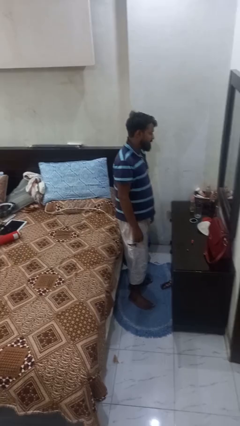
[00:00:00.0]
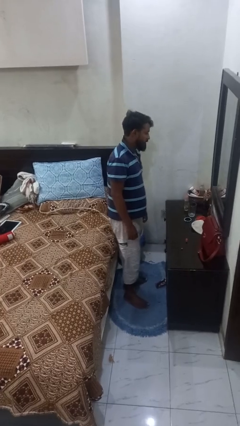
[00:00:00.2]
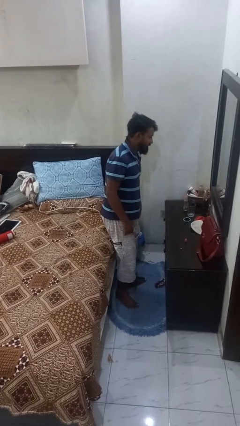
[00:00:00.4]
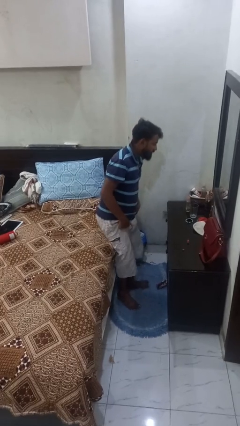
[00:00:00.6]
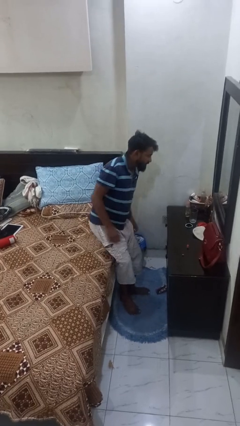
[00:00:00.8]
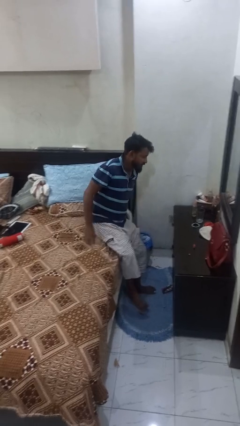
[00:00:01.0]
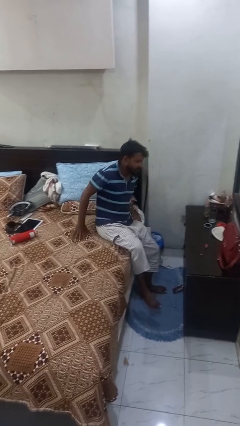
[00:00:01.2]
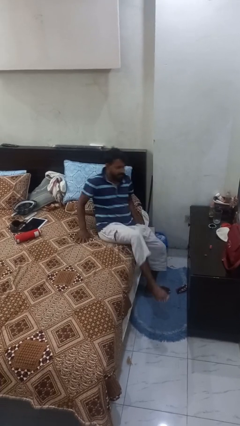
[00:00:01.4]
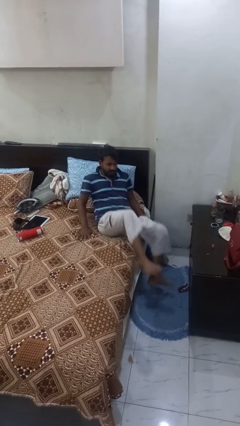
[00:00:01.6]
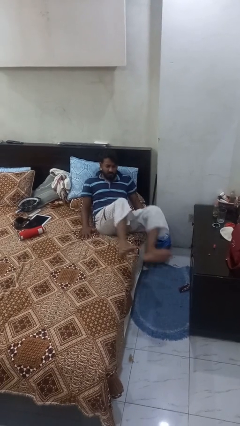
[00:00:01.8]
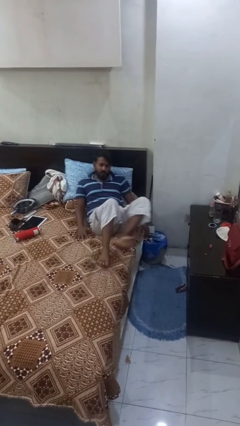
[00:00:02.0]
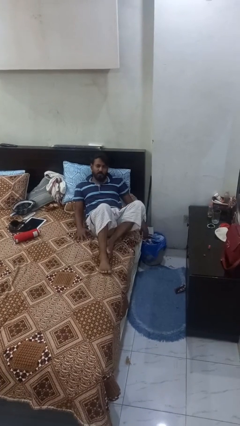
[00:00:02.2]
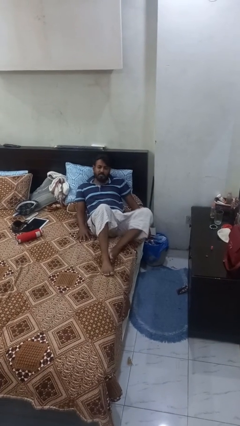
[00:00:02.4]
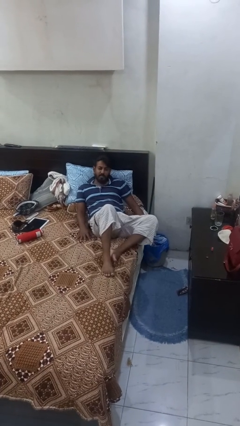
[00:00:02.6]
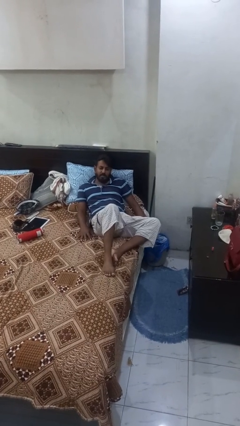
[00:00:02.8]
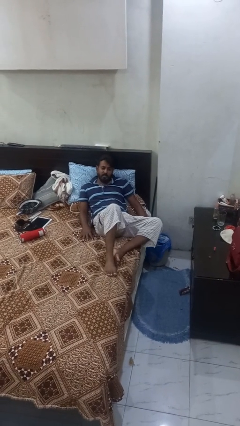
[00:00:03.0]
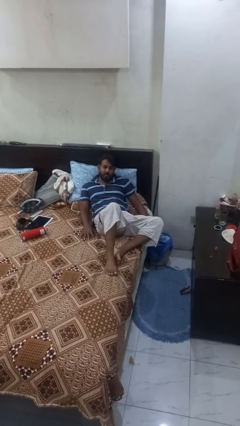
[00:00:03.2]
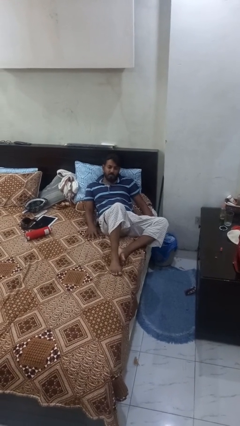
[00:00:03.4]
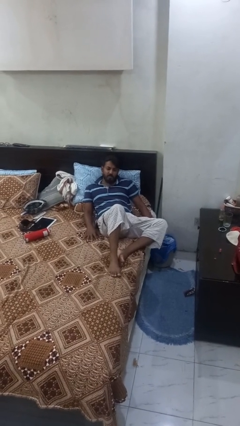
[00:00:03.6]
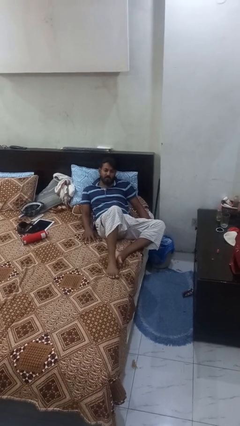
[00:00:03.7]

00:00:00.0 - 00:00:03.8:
person lies down on bed

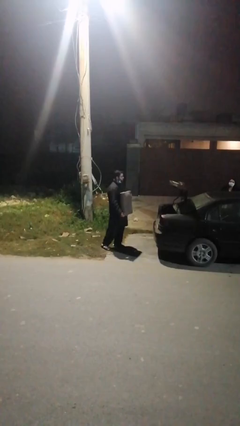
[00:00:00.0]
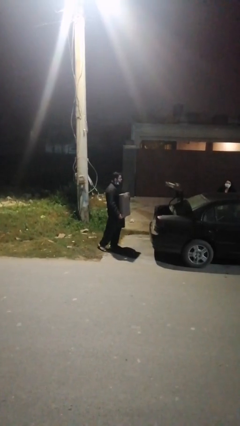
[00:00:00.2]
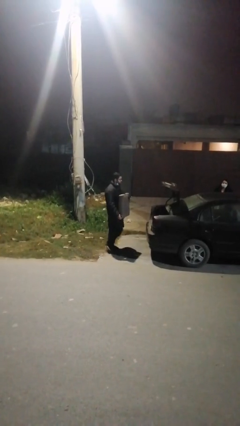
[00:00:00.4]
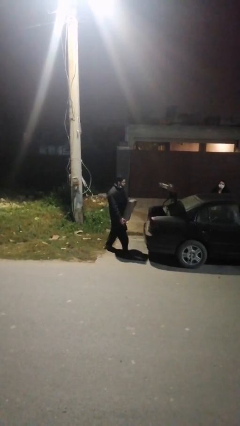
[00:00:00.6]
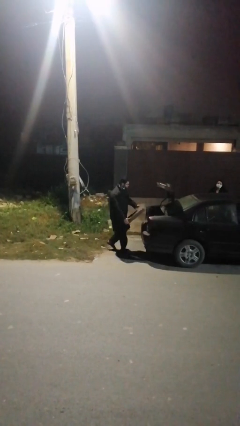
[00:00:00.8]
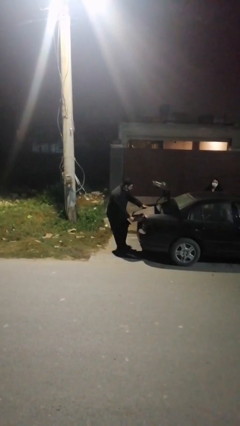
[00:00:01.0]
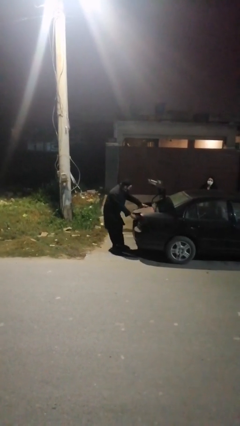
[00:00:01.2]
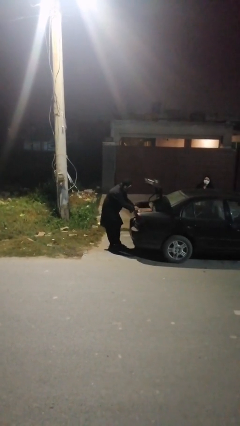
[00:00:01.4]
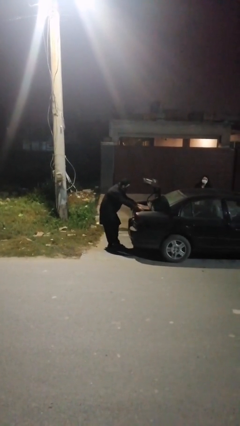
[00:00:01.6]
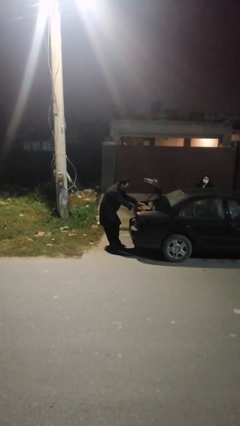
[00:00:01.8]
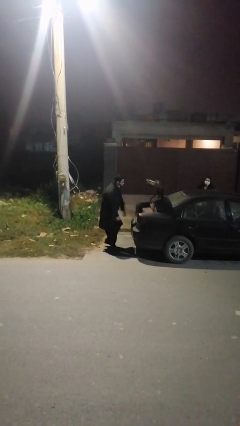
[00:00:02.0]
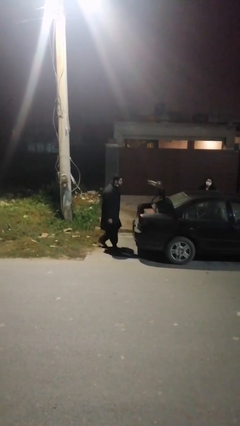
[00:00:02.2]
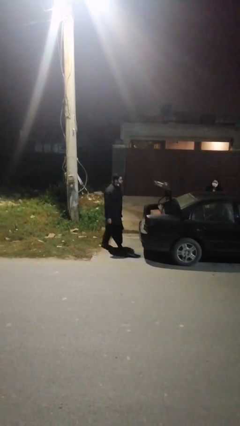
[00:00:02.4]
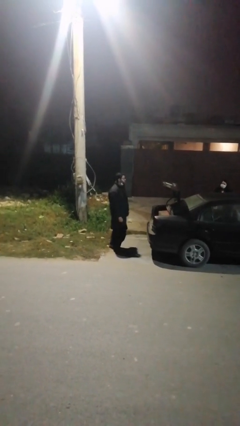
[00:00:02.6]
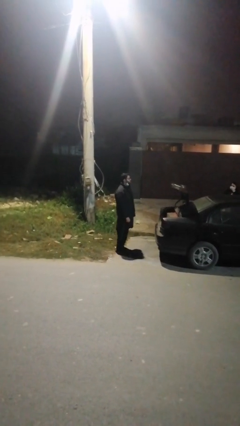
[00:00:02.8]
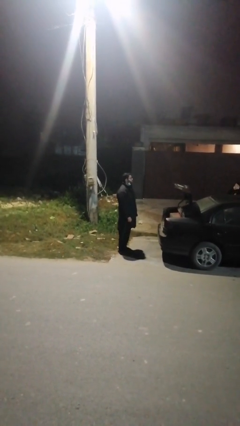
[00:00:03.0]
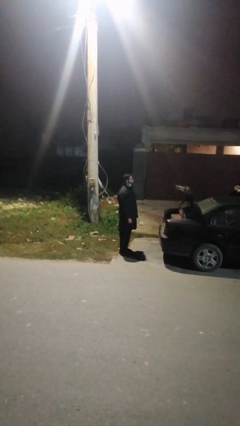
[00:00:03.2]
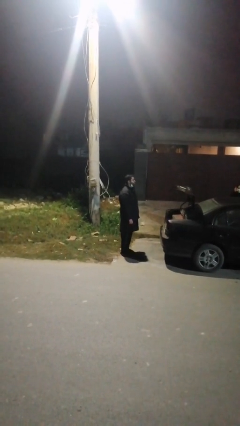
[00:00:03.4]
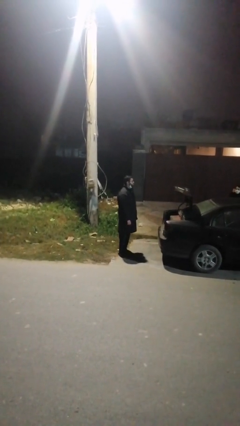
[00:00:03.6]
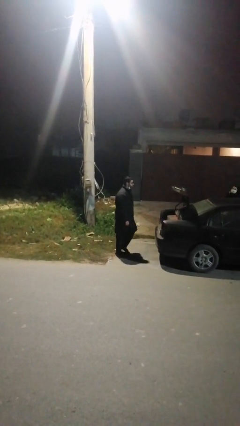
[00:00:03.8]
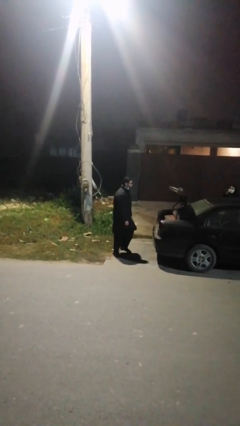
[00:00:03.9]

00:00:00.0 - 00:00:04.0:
person loads car

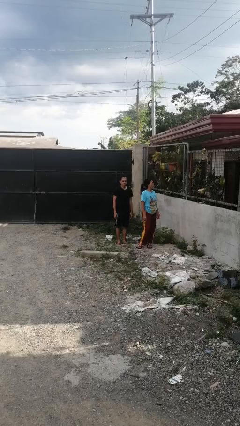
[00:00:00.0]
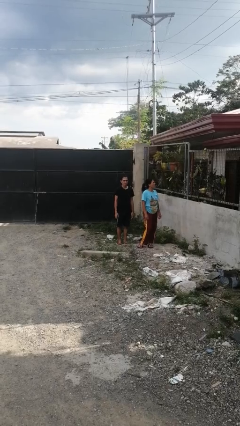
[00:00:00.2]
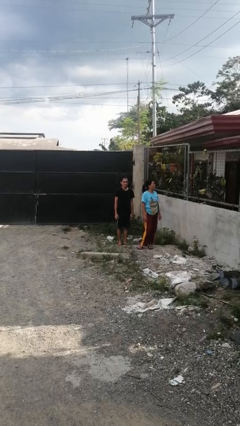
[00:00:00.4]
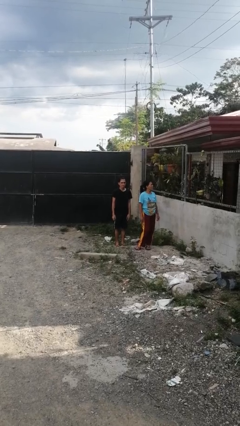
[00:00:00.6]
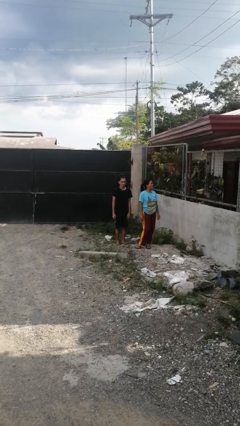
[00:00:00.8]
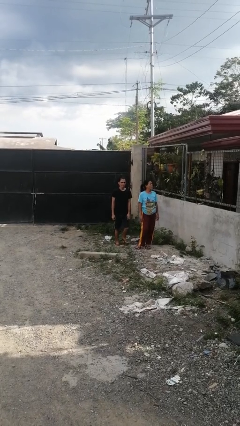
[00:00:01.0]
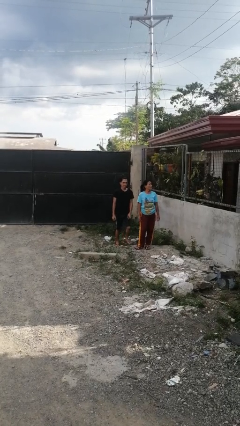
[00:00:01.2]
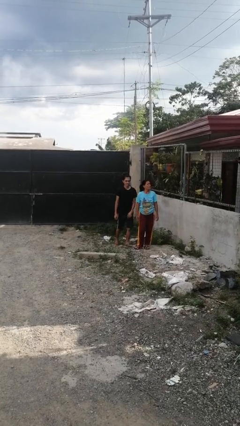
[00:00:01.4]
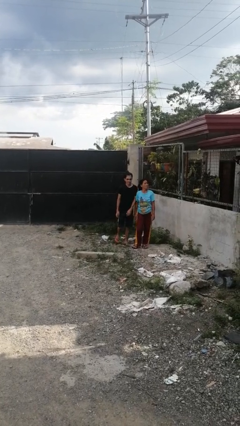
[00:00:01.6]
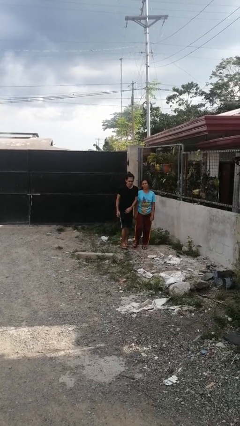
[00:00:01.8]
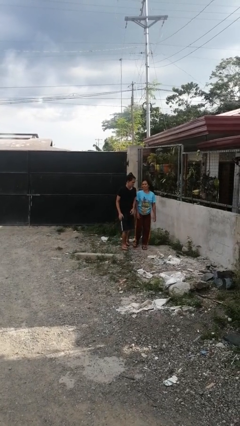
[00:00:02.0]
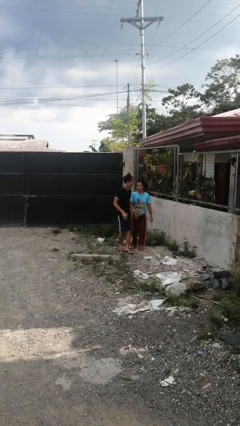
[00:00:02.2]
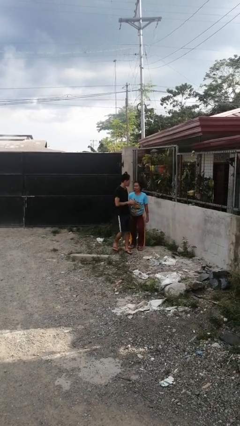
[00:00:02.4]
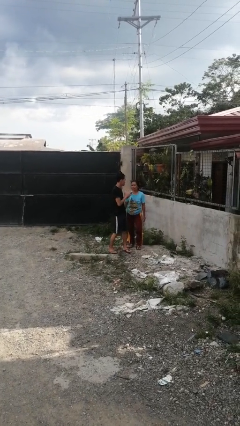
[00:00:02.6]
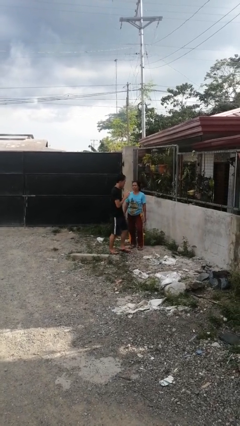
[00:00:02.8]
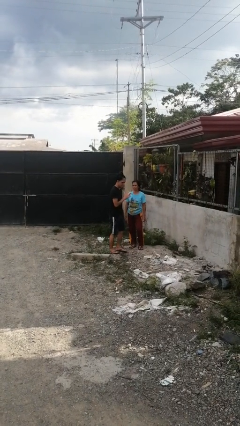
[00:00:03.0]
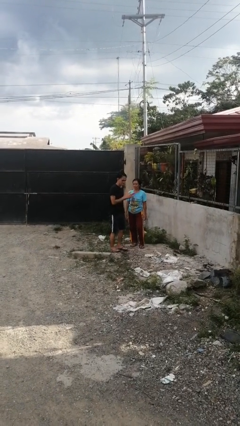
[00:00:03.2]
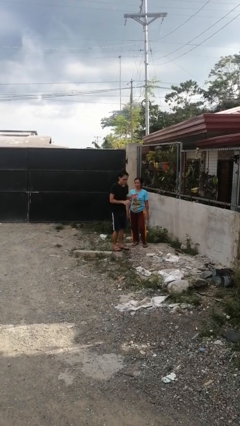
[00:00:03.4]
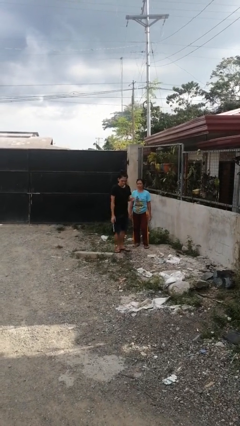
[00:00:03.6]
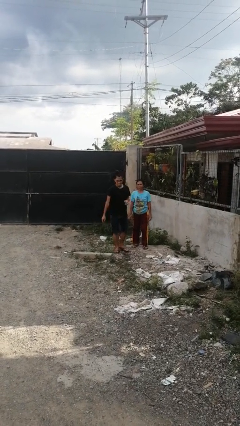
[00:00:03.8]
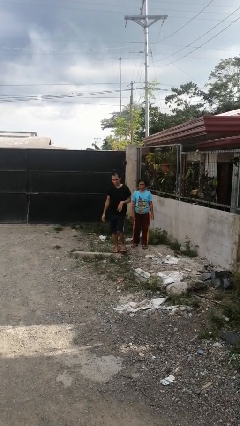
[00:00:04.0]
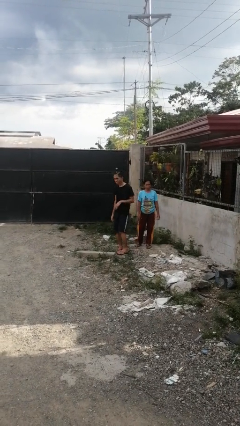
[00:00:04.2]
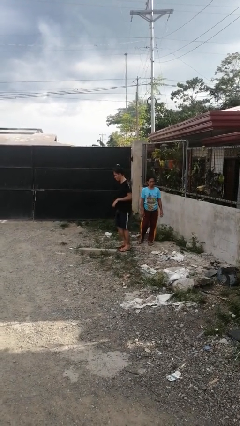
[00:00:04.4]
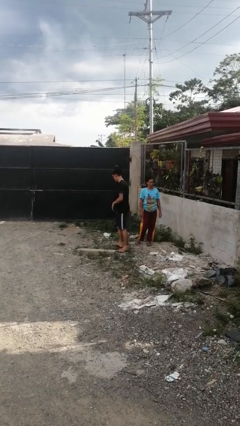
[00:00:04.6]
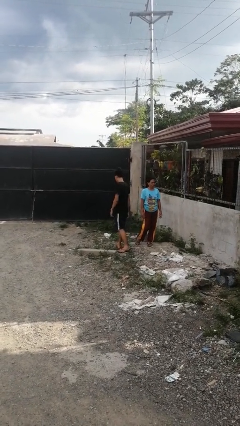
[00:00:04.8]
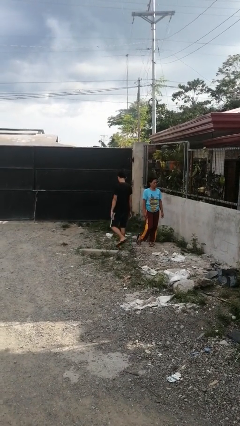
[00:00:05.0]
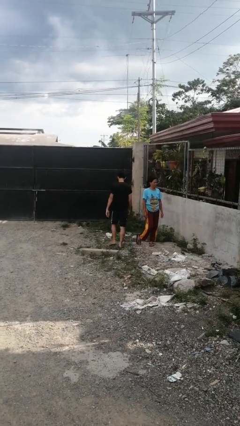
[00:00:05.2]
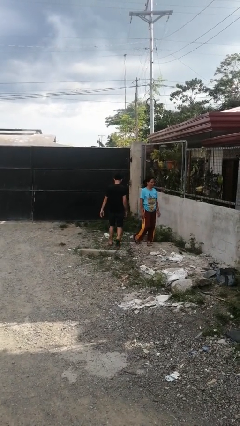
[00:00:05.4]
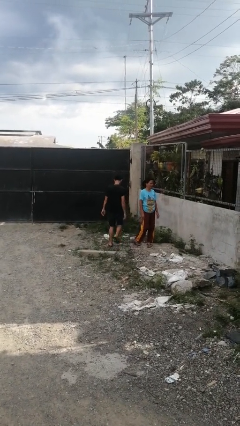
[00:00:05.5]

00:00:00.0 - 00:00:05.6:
person bumps into person

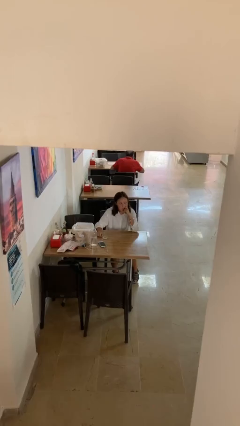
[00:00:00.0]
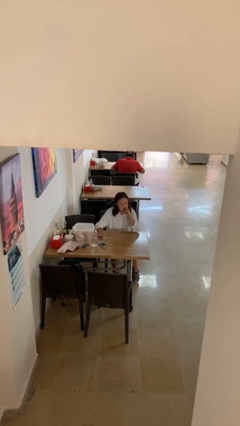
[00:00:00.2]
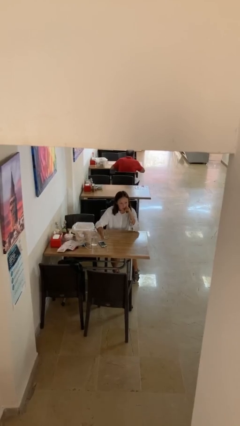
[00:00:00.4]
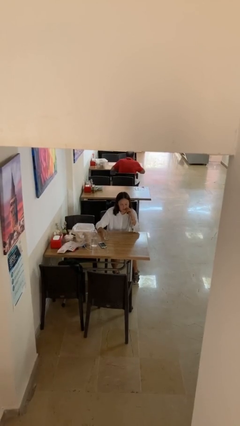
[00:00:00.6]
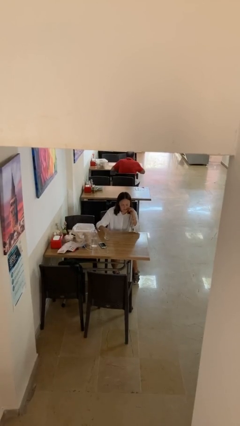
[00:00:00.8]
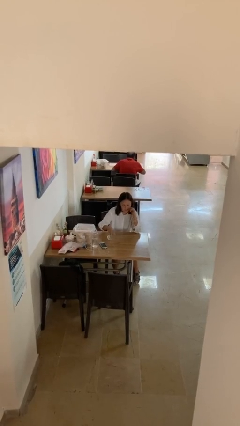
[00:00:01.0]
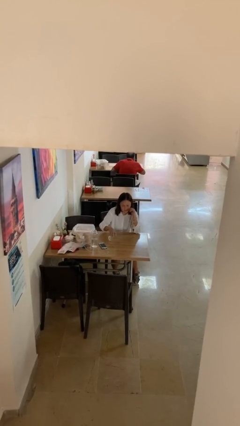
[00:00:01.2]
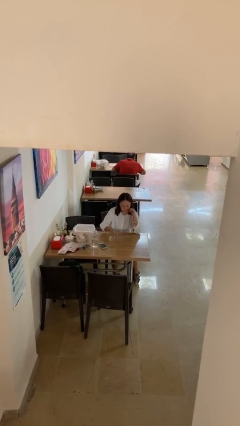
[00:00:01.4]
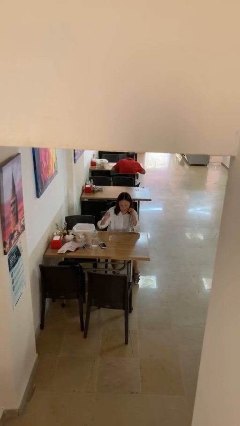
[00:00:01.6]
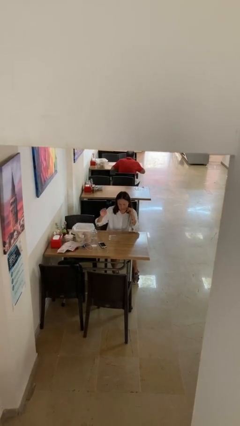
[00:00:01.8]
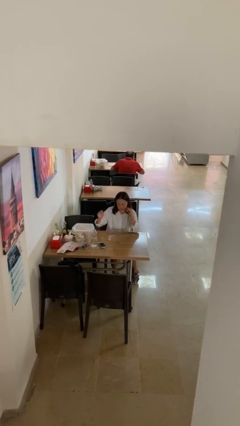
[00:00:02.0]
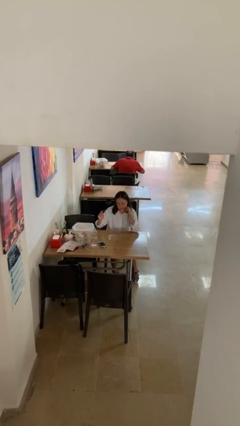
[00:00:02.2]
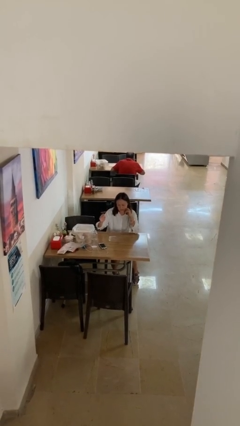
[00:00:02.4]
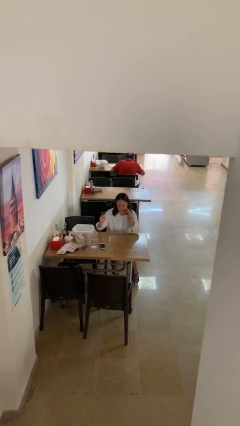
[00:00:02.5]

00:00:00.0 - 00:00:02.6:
person knocks over glass

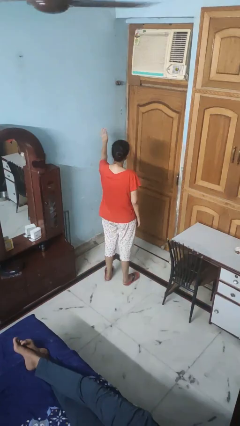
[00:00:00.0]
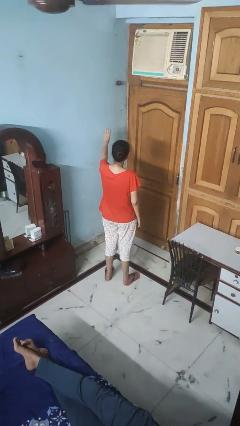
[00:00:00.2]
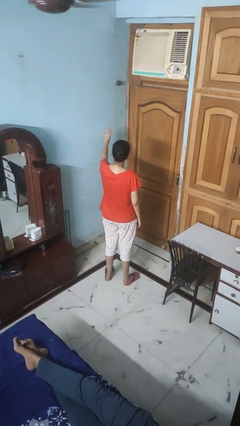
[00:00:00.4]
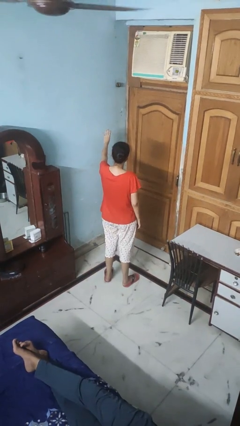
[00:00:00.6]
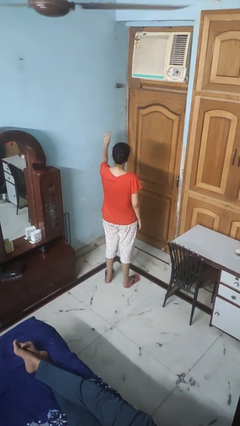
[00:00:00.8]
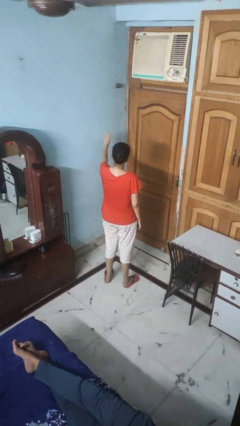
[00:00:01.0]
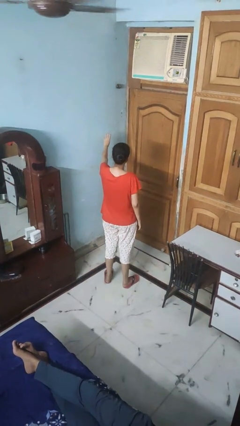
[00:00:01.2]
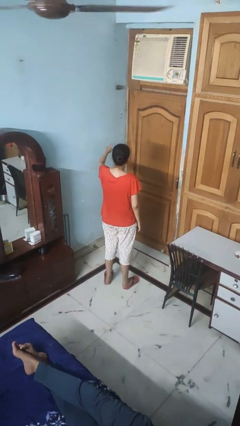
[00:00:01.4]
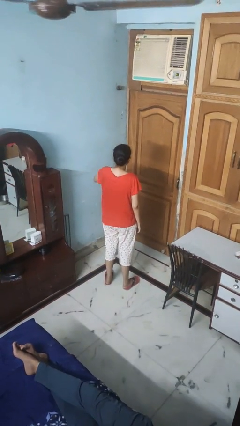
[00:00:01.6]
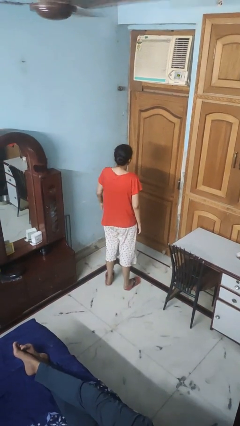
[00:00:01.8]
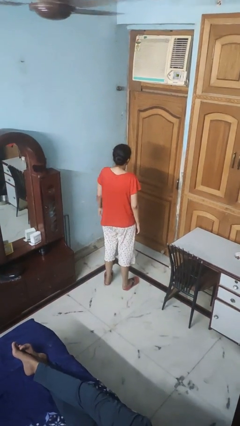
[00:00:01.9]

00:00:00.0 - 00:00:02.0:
person gestures number four
